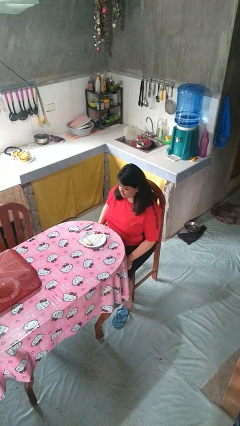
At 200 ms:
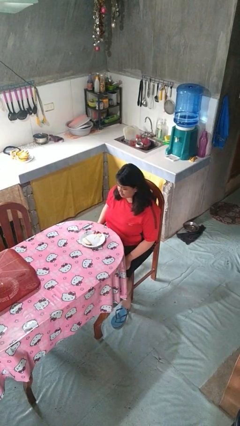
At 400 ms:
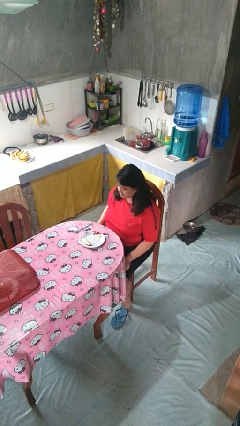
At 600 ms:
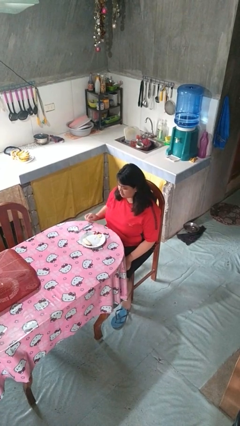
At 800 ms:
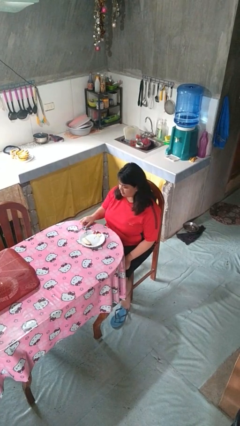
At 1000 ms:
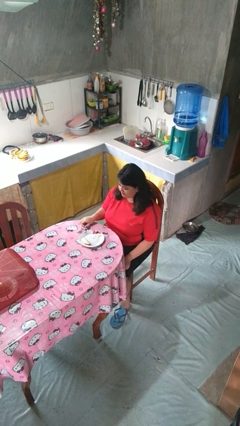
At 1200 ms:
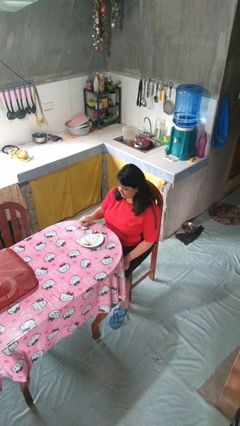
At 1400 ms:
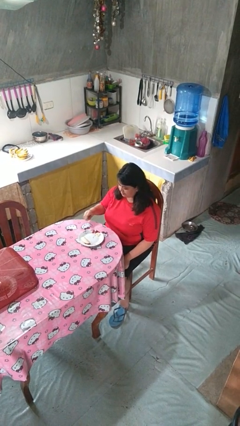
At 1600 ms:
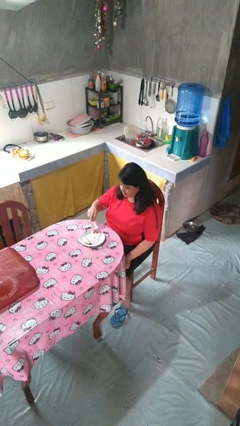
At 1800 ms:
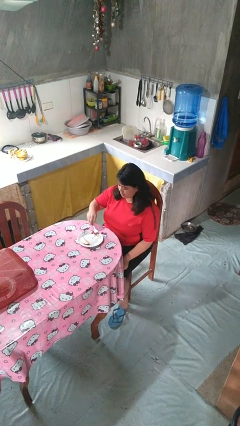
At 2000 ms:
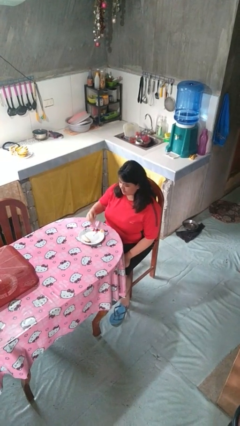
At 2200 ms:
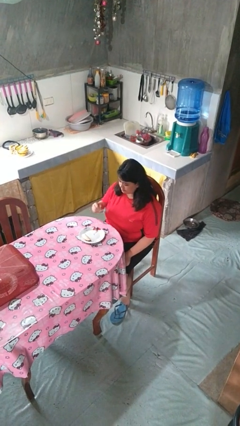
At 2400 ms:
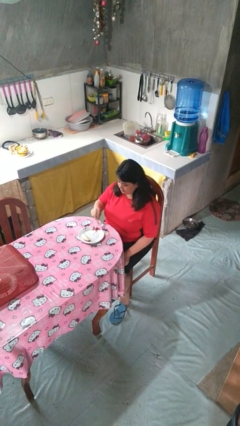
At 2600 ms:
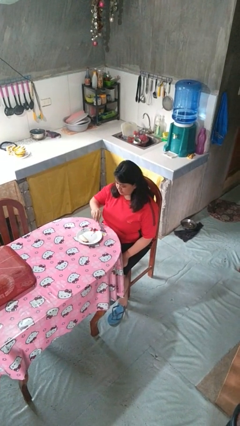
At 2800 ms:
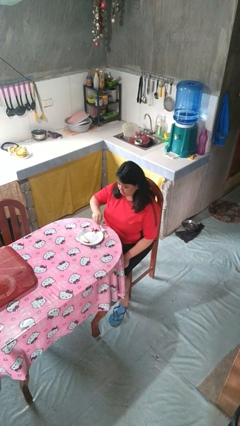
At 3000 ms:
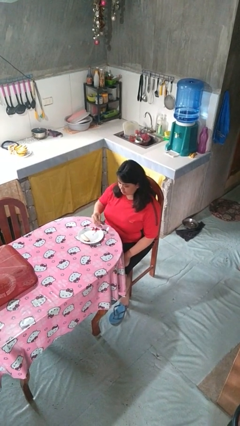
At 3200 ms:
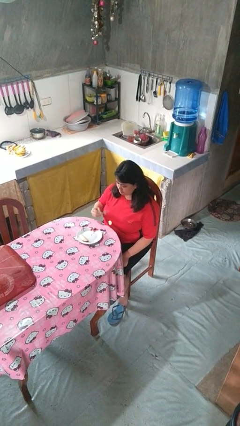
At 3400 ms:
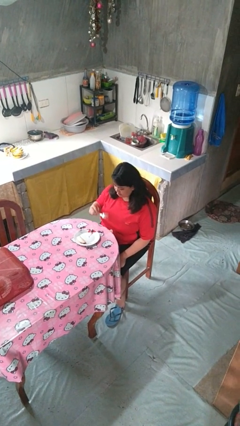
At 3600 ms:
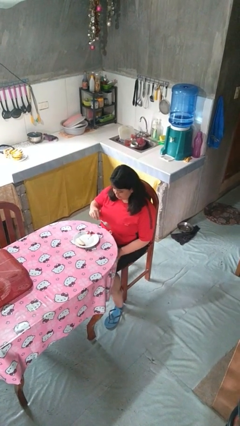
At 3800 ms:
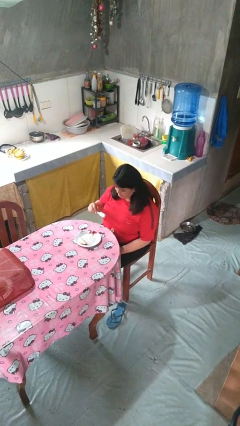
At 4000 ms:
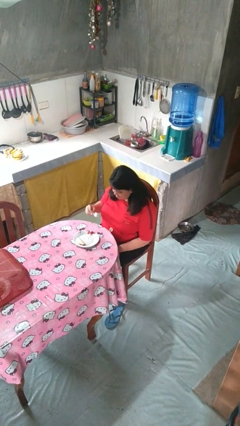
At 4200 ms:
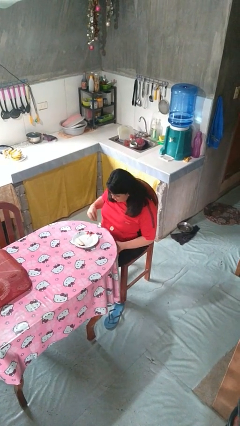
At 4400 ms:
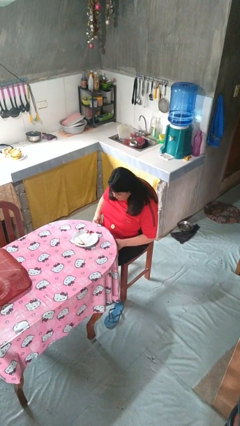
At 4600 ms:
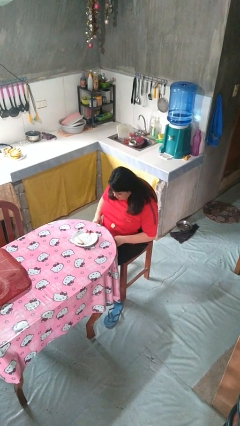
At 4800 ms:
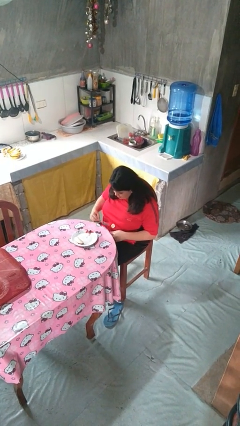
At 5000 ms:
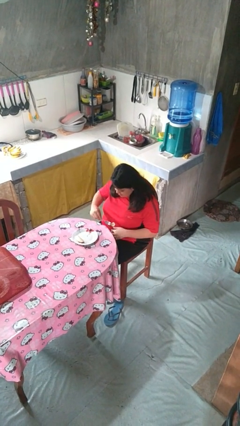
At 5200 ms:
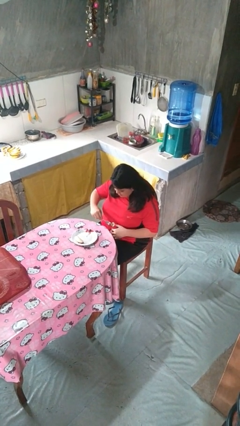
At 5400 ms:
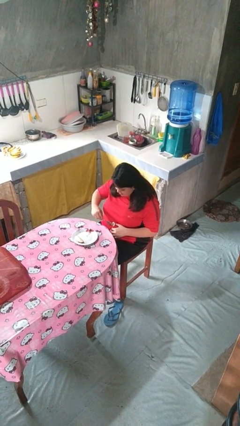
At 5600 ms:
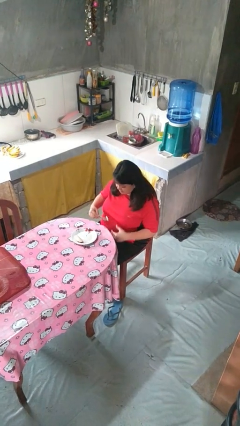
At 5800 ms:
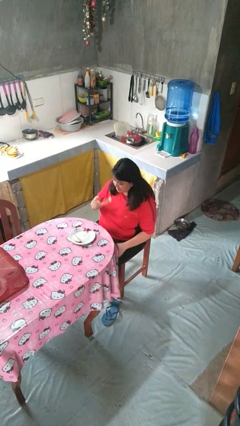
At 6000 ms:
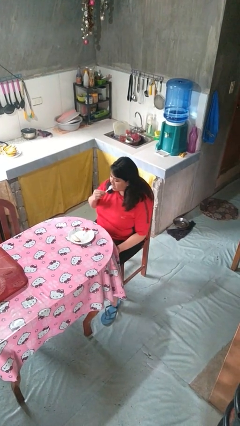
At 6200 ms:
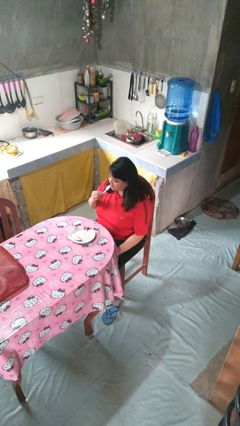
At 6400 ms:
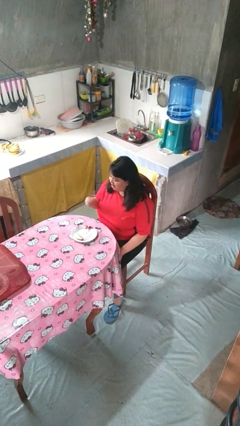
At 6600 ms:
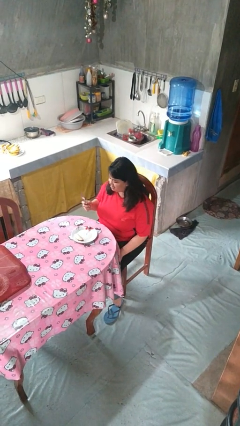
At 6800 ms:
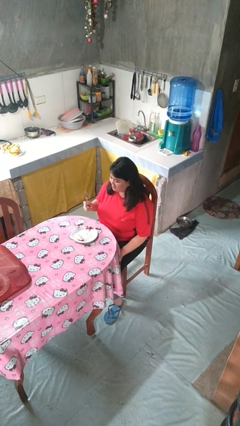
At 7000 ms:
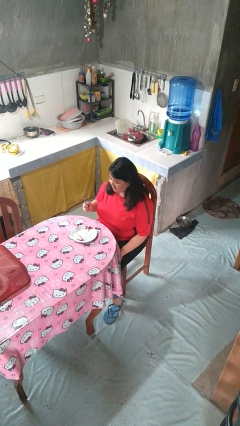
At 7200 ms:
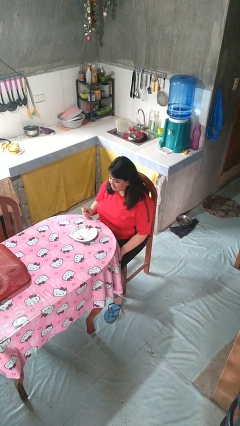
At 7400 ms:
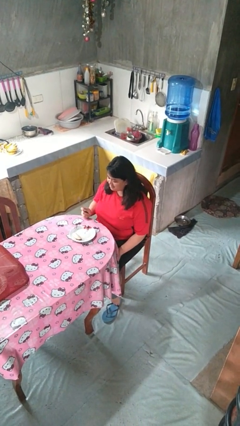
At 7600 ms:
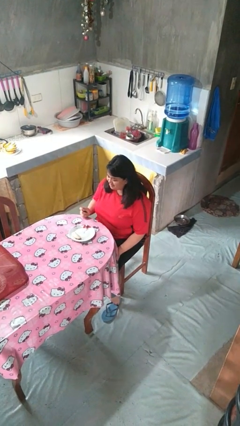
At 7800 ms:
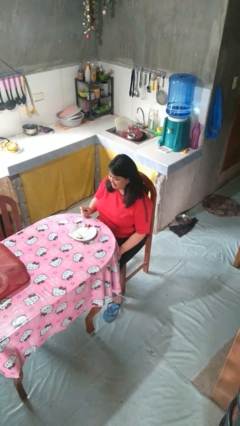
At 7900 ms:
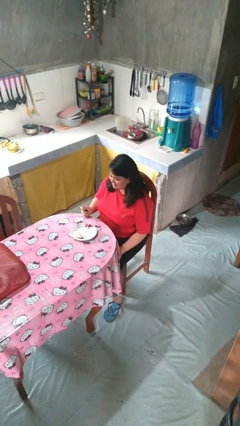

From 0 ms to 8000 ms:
person eats with utensil

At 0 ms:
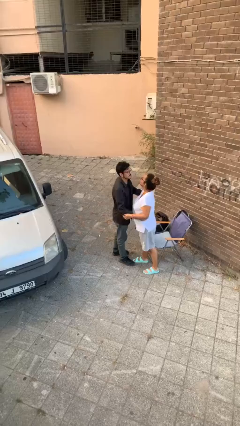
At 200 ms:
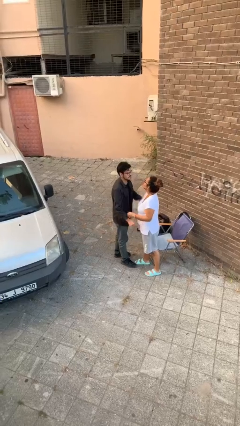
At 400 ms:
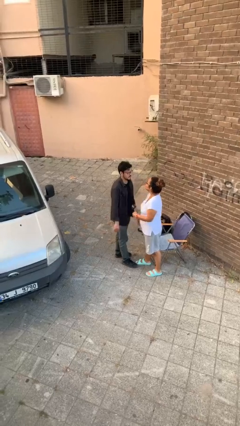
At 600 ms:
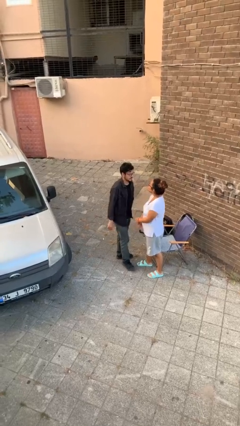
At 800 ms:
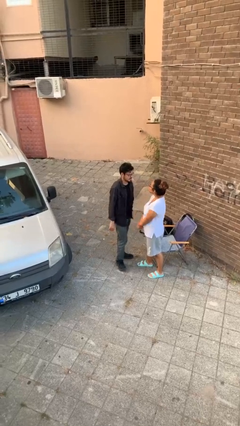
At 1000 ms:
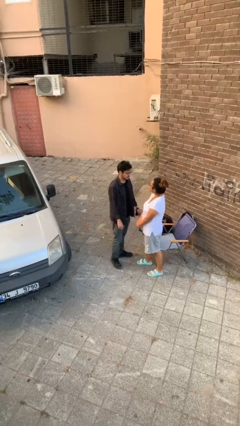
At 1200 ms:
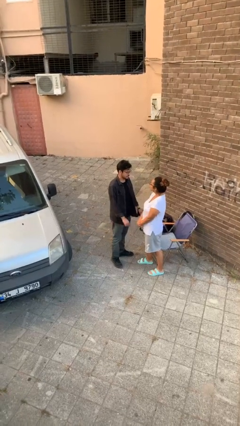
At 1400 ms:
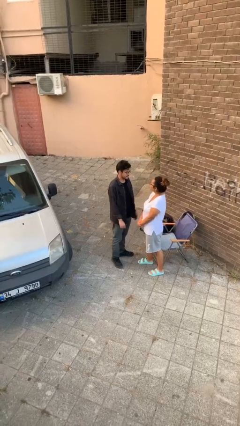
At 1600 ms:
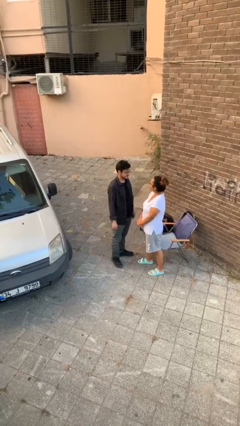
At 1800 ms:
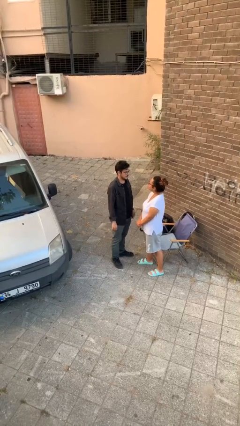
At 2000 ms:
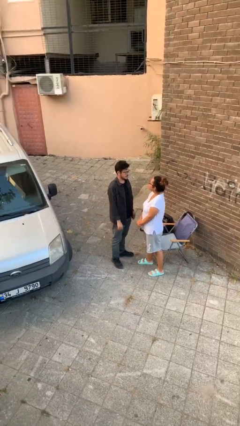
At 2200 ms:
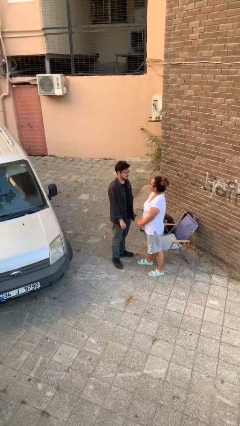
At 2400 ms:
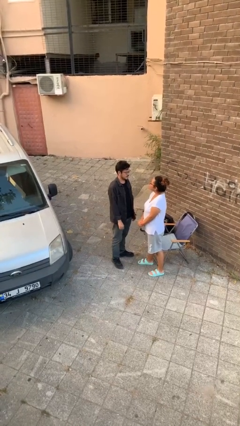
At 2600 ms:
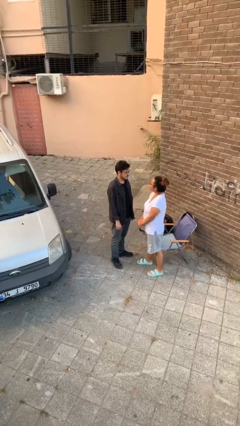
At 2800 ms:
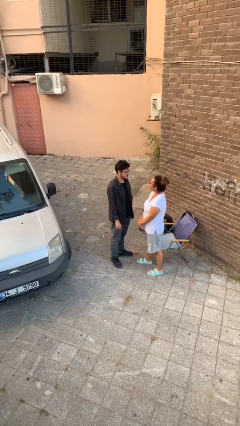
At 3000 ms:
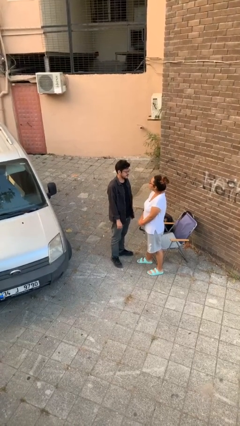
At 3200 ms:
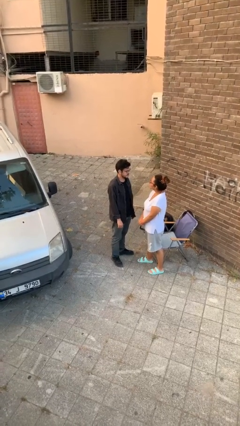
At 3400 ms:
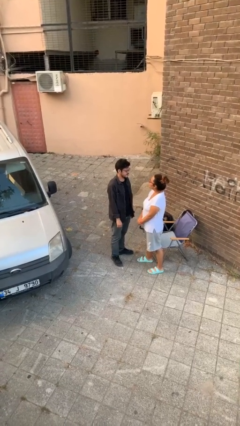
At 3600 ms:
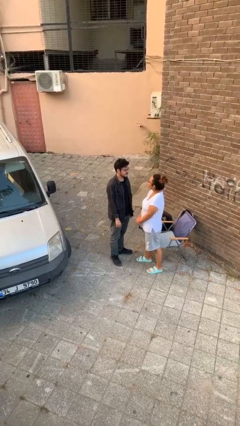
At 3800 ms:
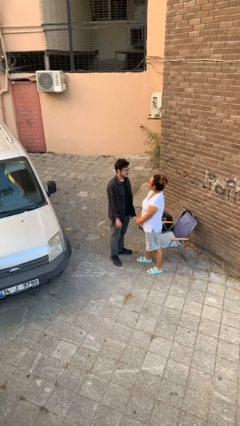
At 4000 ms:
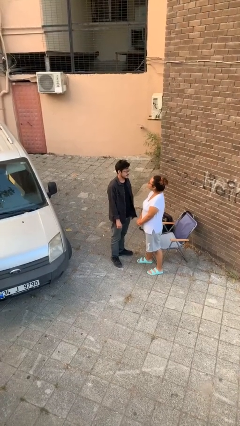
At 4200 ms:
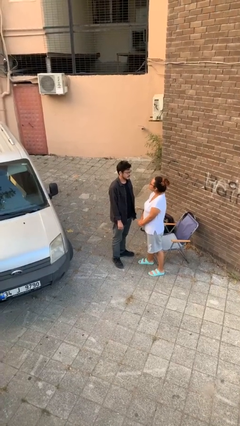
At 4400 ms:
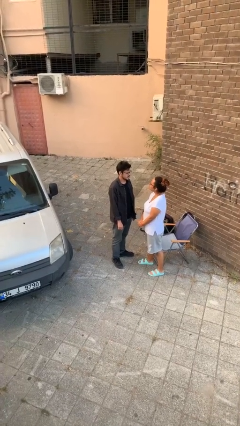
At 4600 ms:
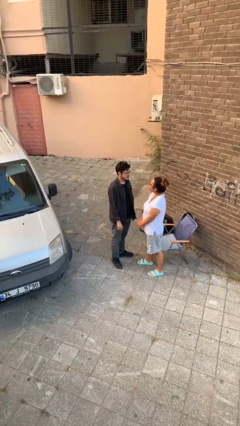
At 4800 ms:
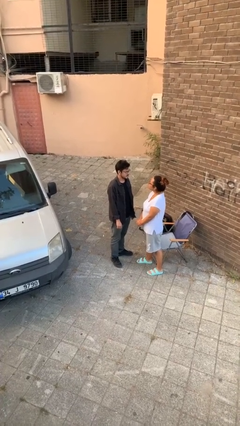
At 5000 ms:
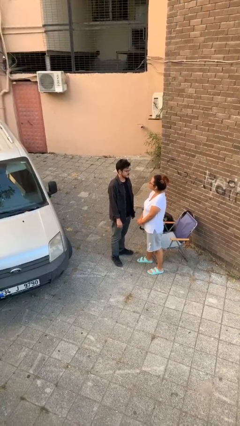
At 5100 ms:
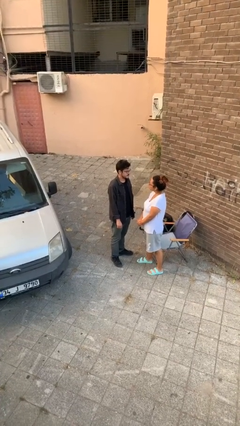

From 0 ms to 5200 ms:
person talks to person

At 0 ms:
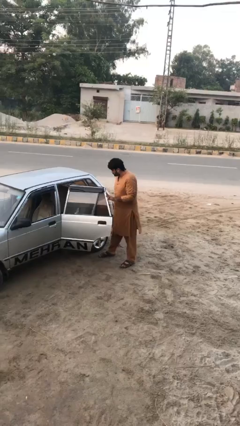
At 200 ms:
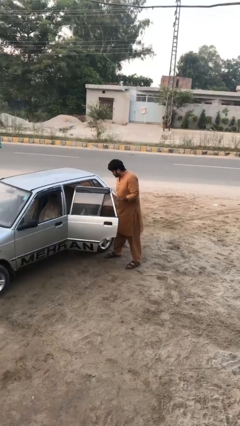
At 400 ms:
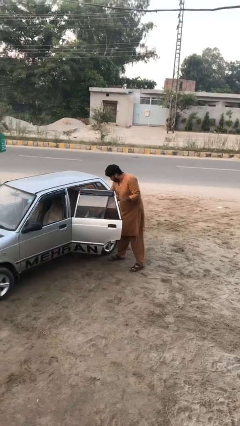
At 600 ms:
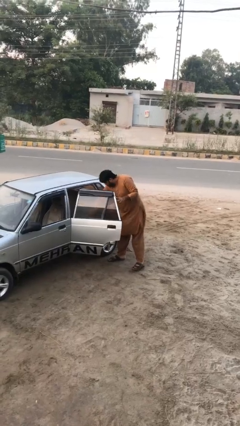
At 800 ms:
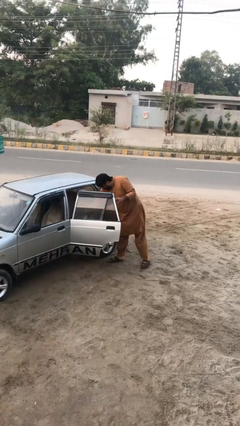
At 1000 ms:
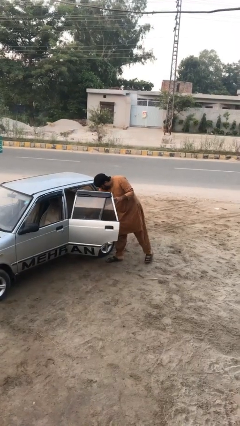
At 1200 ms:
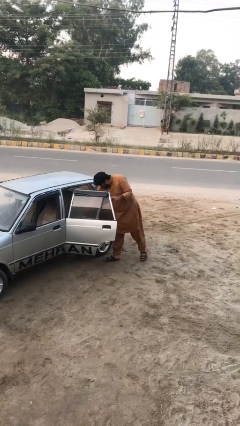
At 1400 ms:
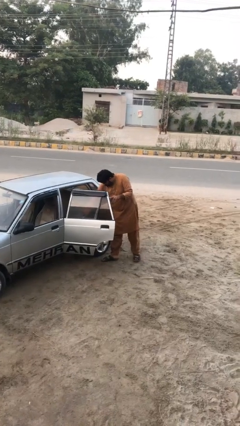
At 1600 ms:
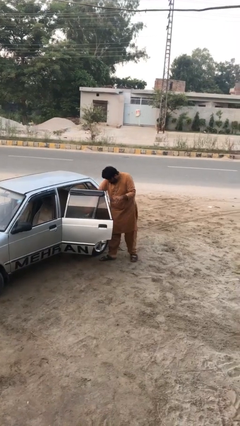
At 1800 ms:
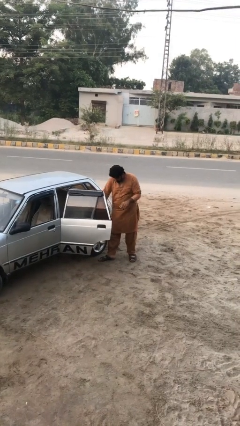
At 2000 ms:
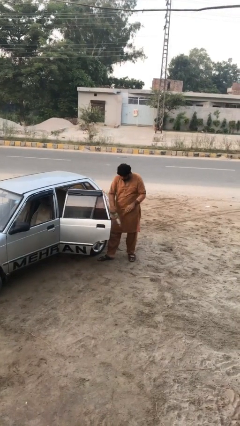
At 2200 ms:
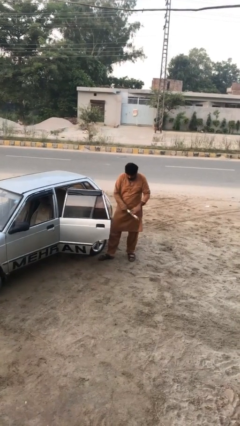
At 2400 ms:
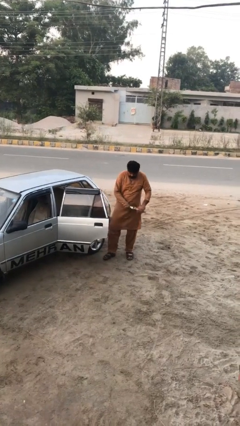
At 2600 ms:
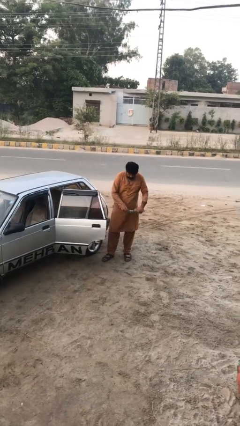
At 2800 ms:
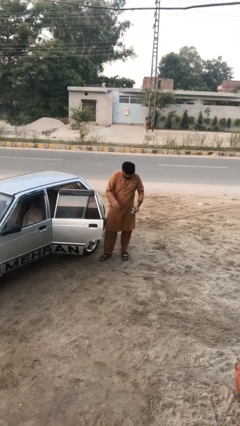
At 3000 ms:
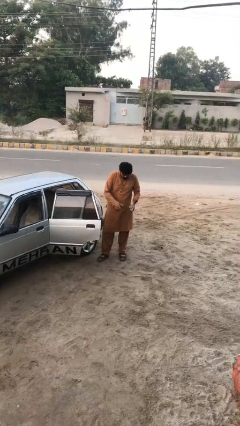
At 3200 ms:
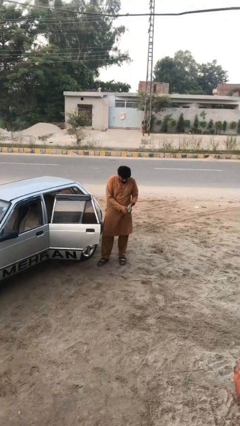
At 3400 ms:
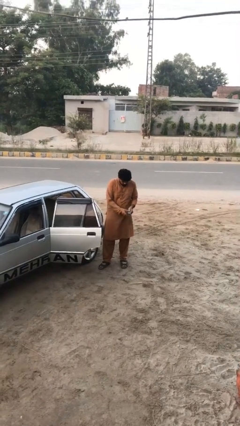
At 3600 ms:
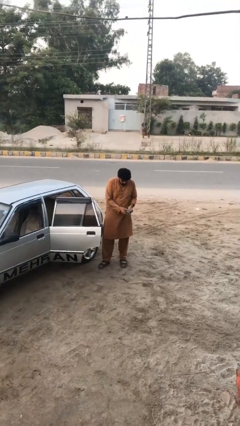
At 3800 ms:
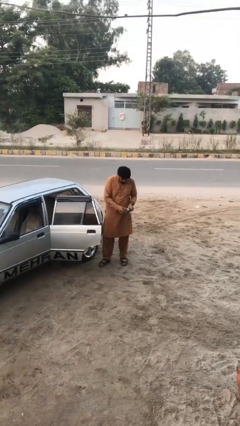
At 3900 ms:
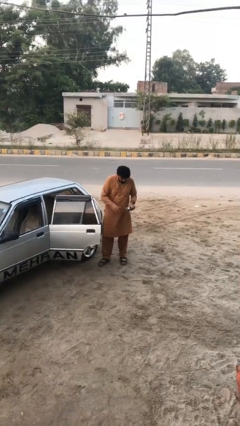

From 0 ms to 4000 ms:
person unloads car

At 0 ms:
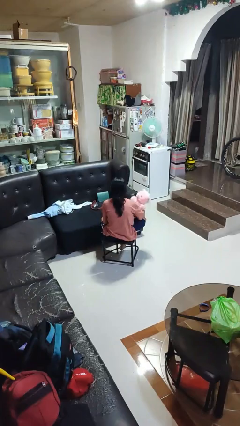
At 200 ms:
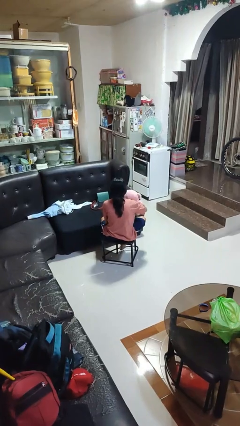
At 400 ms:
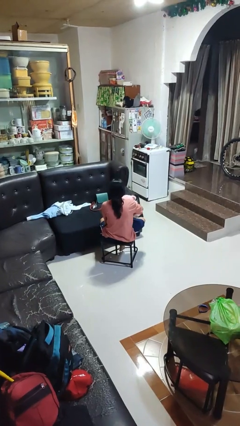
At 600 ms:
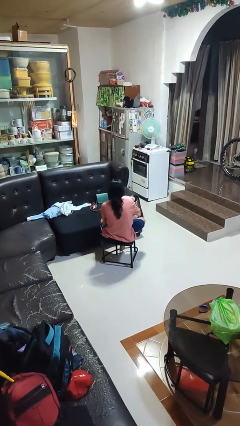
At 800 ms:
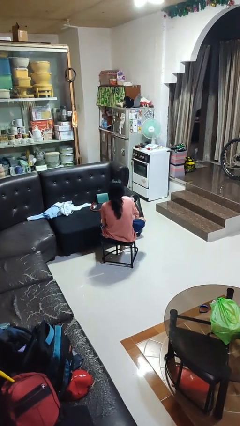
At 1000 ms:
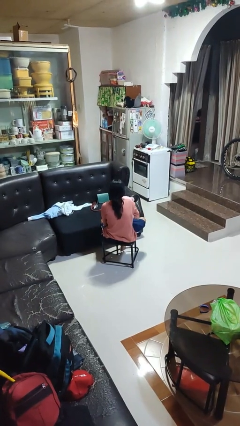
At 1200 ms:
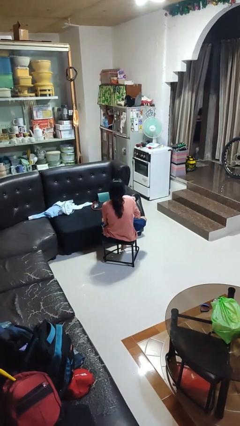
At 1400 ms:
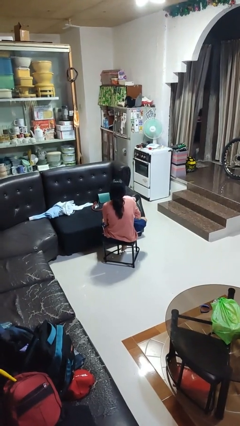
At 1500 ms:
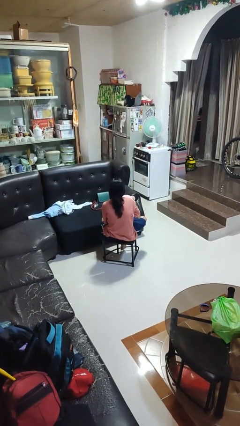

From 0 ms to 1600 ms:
person hugs stuffed animal
